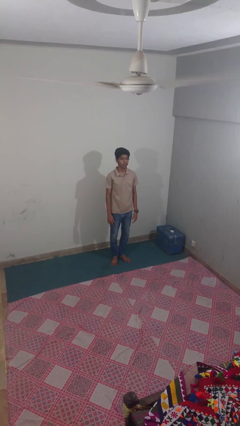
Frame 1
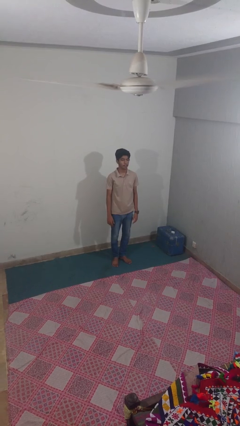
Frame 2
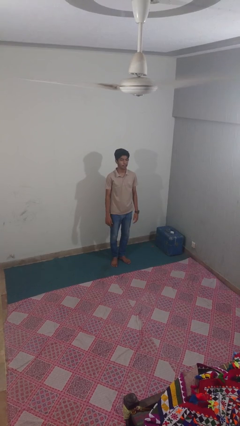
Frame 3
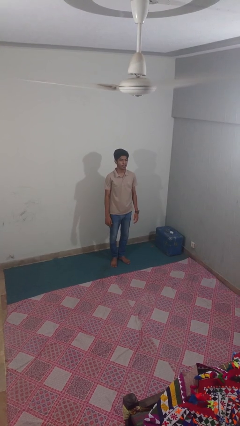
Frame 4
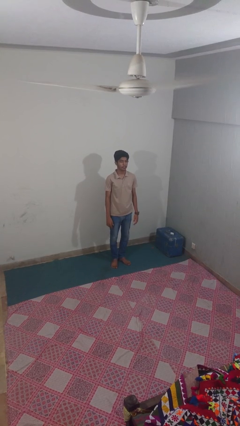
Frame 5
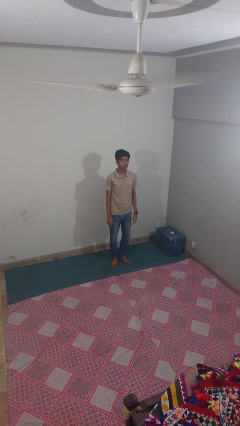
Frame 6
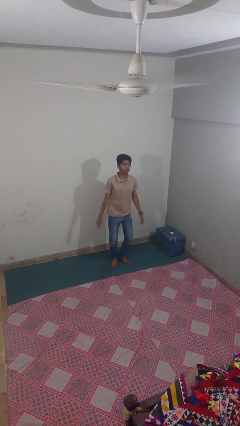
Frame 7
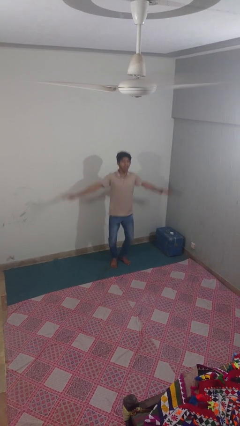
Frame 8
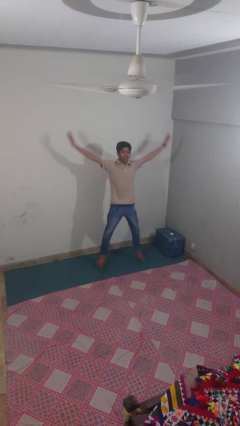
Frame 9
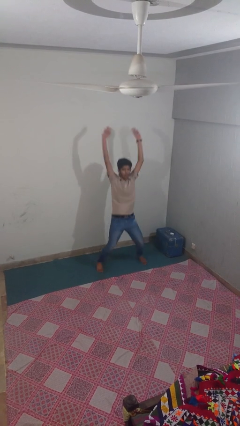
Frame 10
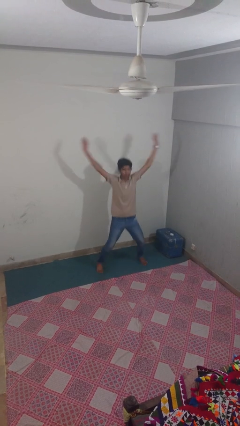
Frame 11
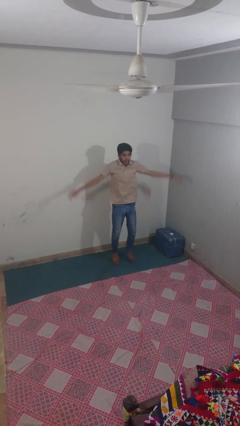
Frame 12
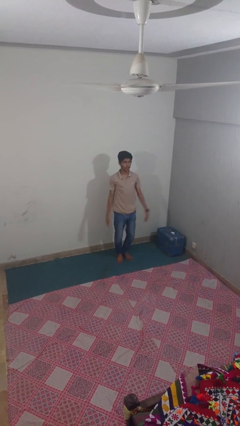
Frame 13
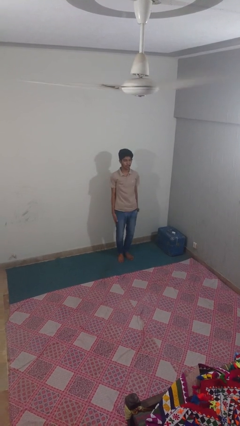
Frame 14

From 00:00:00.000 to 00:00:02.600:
person exercises with jumping jacks

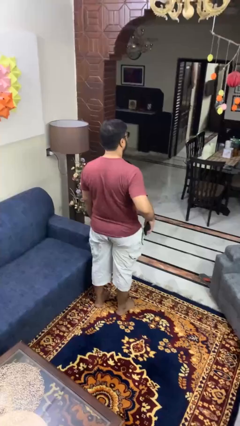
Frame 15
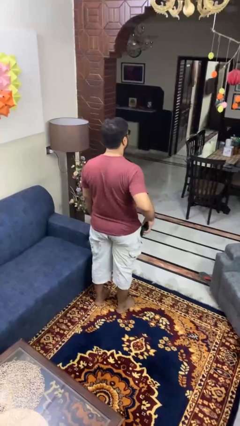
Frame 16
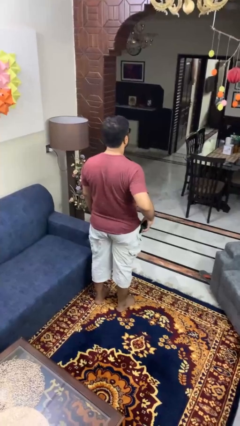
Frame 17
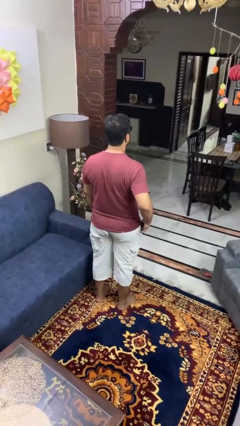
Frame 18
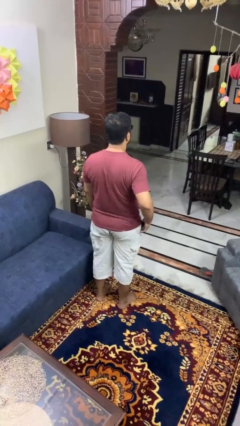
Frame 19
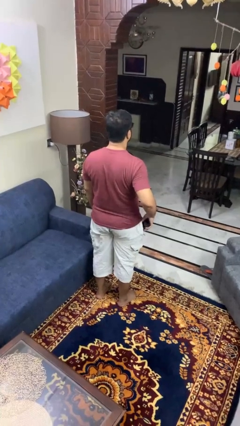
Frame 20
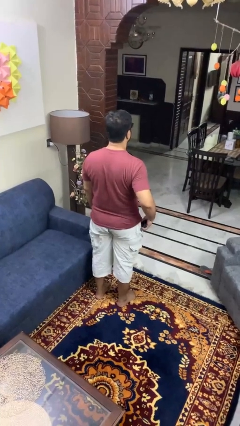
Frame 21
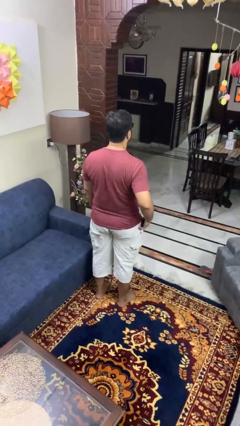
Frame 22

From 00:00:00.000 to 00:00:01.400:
person puts phone into pocket

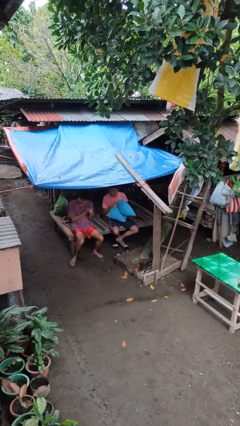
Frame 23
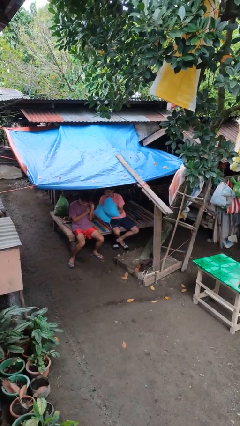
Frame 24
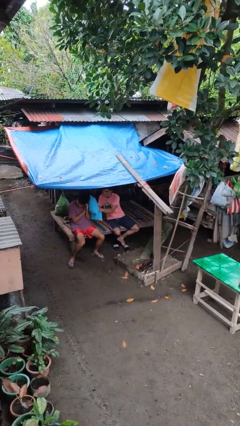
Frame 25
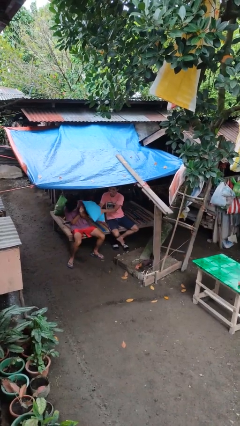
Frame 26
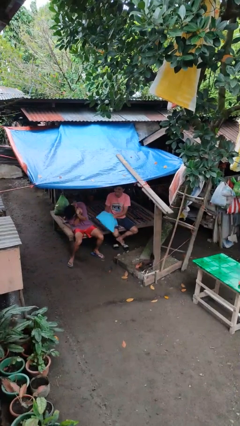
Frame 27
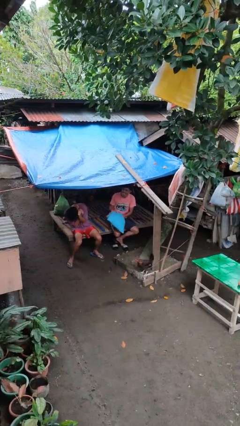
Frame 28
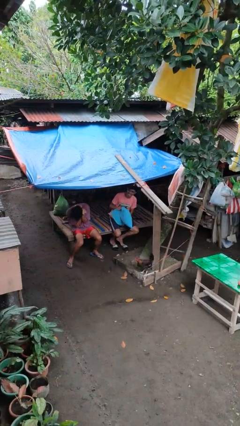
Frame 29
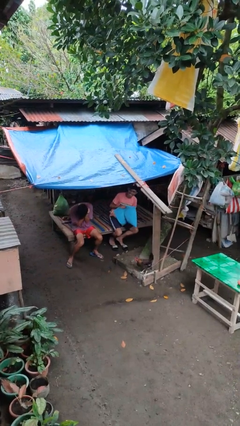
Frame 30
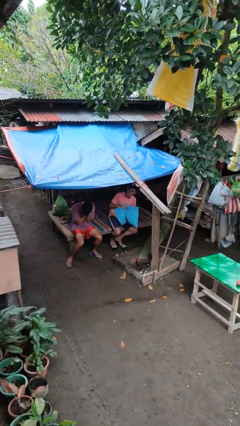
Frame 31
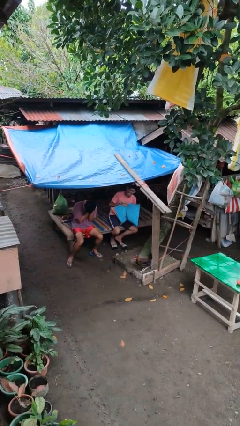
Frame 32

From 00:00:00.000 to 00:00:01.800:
person hits person with pillow

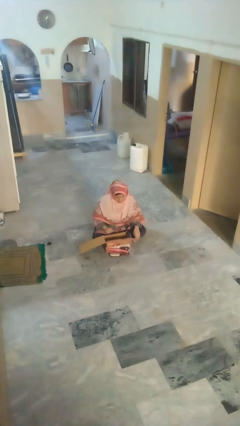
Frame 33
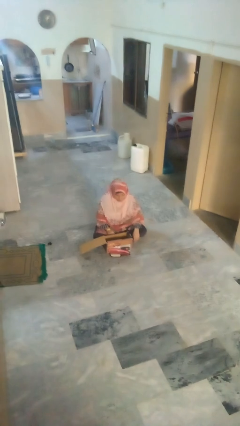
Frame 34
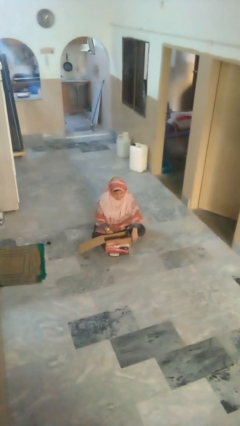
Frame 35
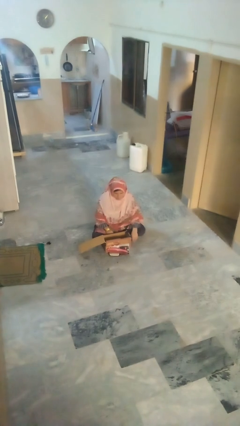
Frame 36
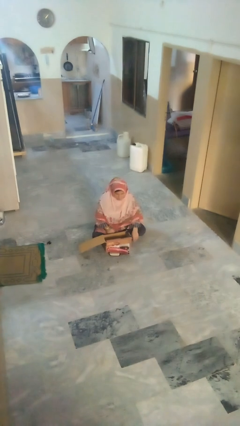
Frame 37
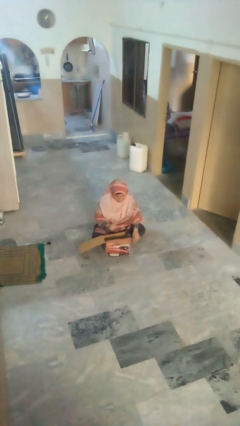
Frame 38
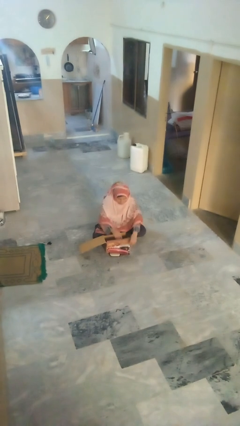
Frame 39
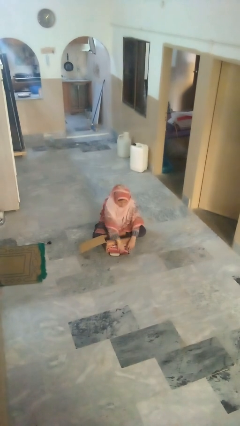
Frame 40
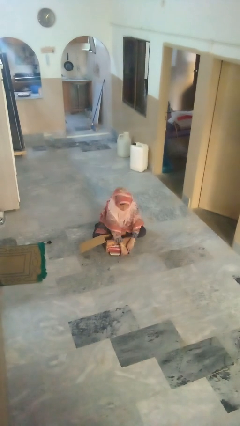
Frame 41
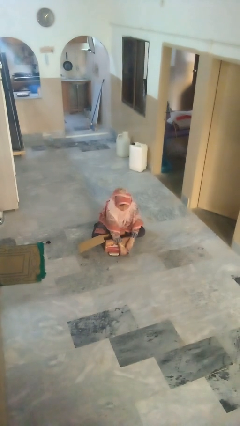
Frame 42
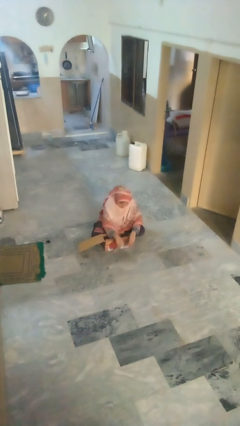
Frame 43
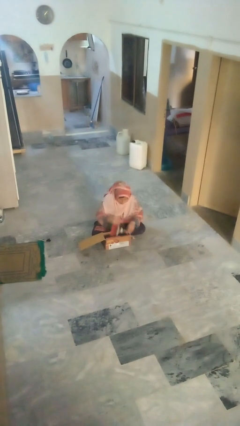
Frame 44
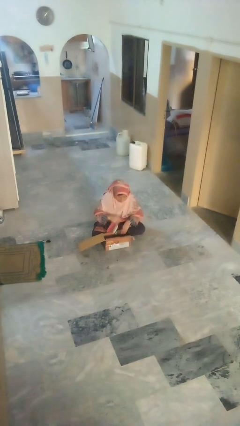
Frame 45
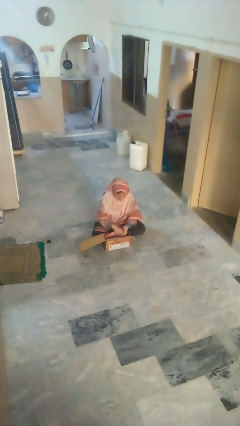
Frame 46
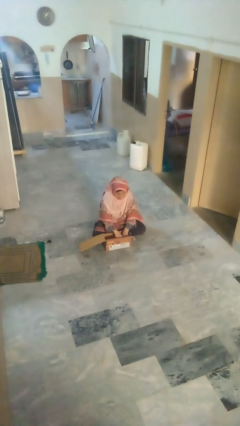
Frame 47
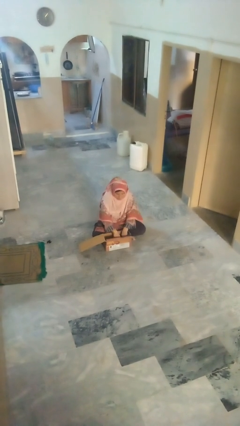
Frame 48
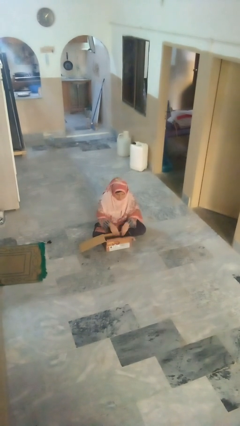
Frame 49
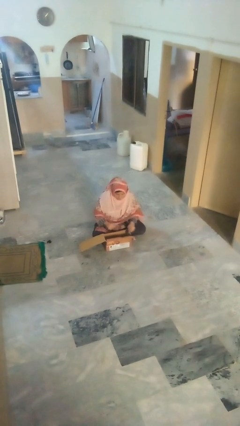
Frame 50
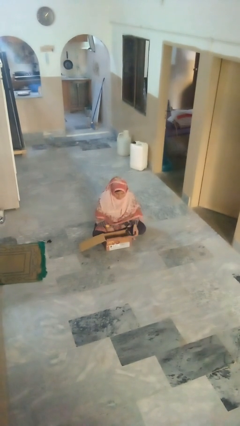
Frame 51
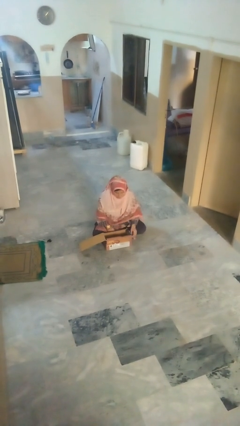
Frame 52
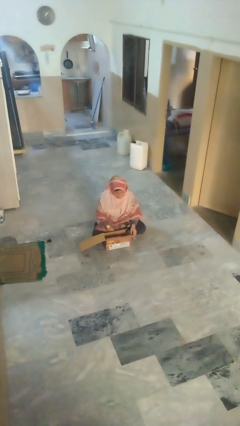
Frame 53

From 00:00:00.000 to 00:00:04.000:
person puts object into box

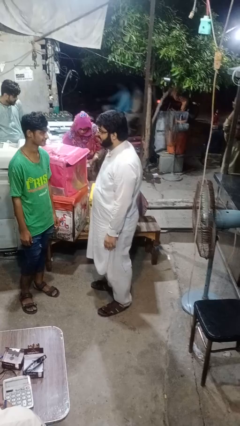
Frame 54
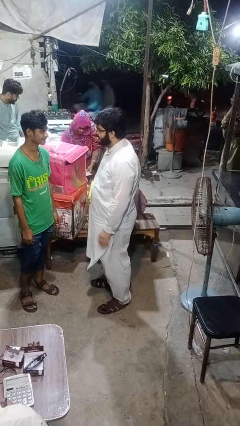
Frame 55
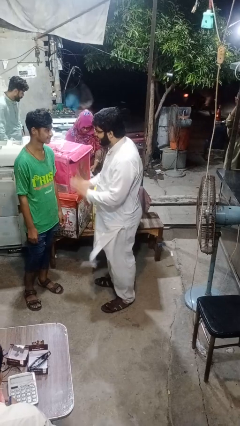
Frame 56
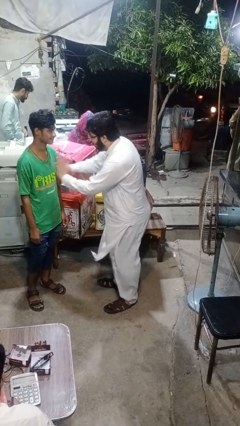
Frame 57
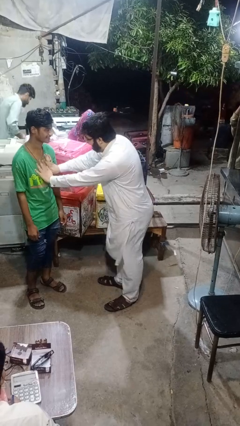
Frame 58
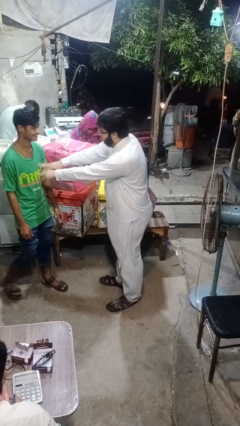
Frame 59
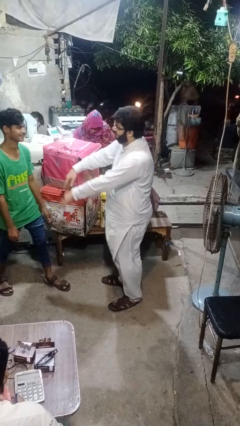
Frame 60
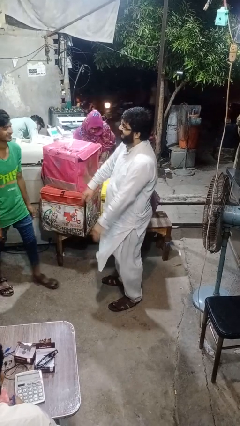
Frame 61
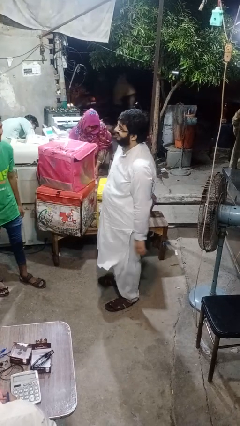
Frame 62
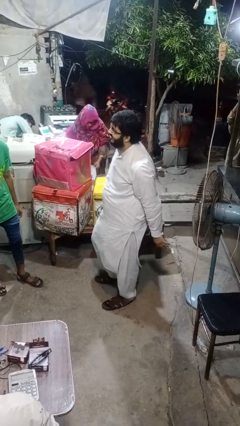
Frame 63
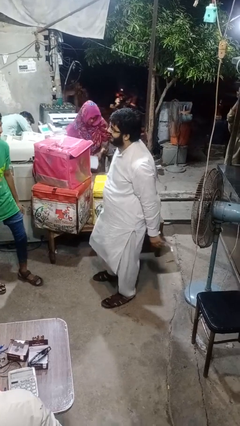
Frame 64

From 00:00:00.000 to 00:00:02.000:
person shoves person

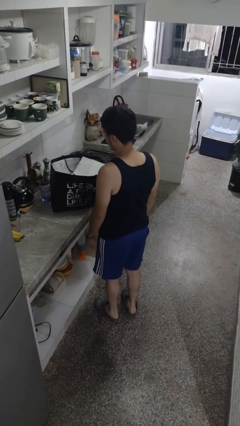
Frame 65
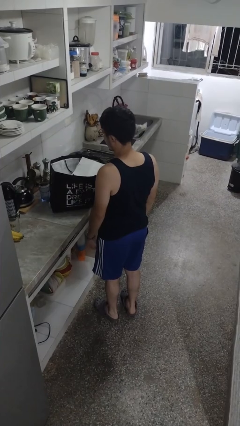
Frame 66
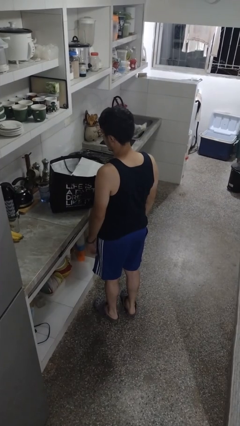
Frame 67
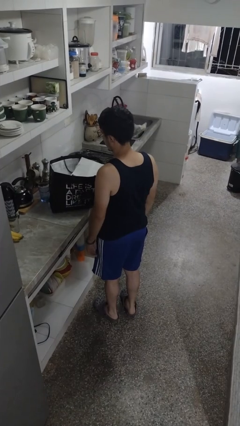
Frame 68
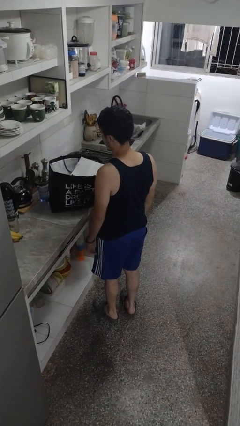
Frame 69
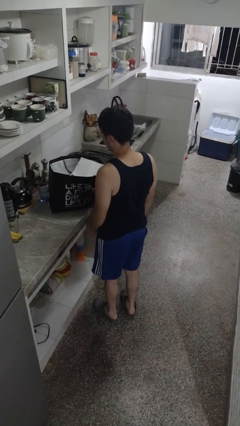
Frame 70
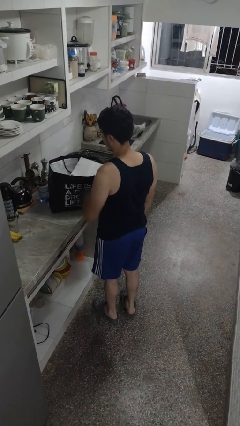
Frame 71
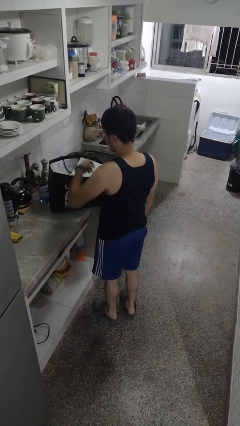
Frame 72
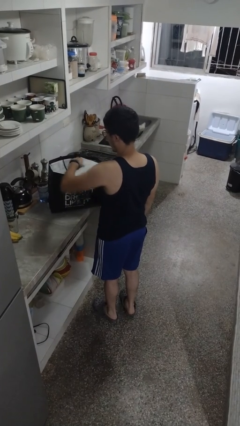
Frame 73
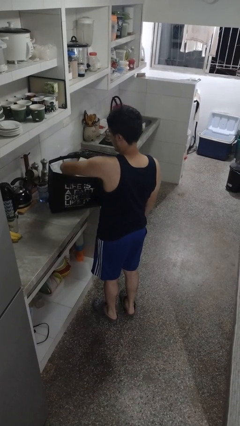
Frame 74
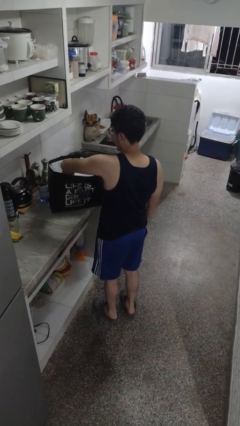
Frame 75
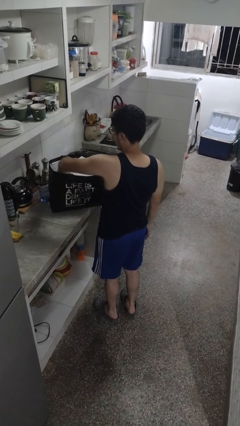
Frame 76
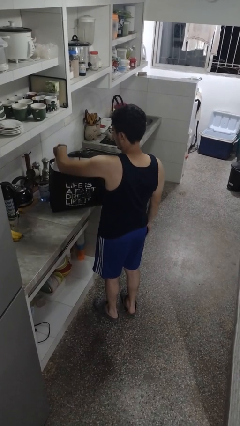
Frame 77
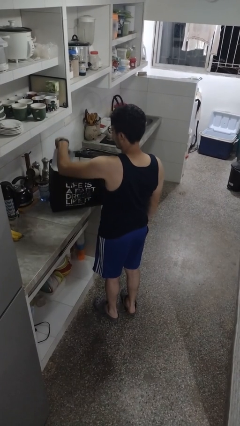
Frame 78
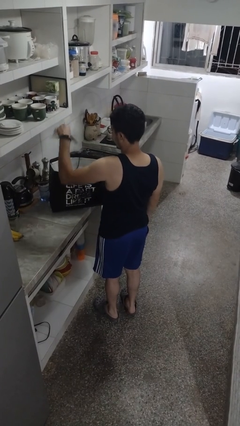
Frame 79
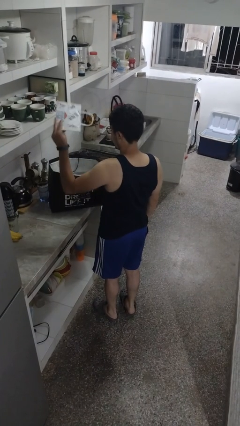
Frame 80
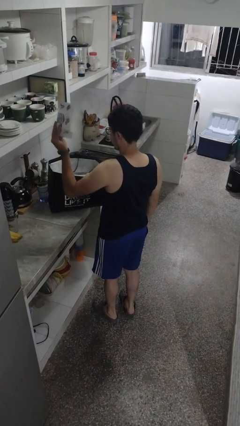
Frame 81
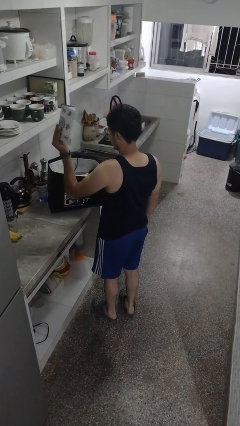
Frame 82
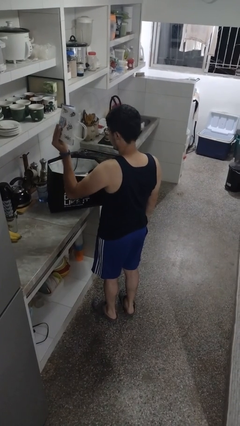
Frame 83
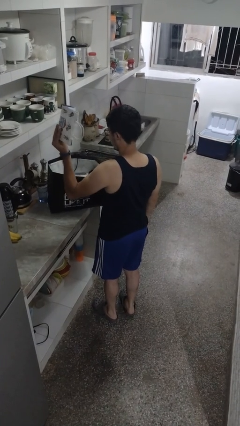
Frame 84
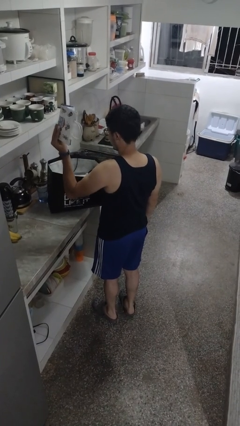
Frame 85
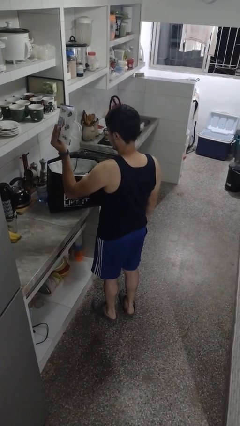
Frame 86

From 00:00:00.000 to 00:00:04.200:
person takes object from bag

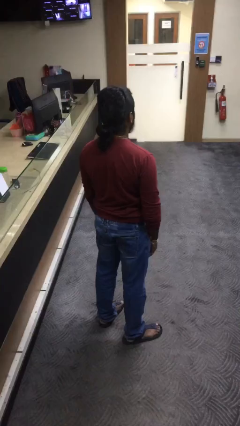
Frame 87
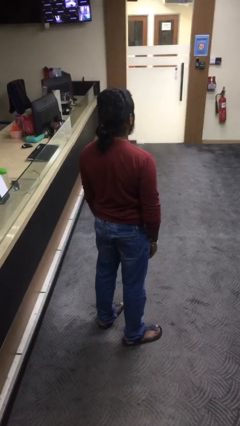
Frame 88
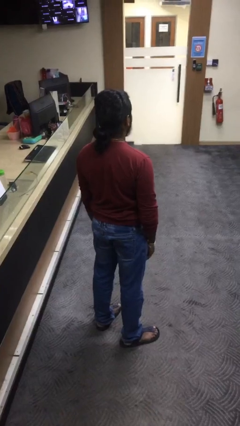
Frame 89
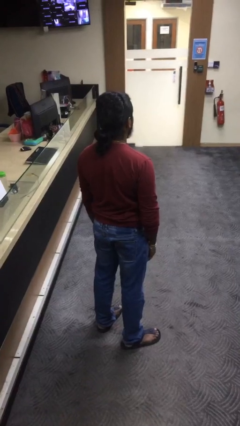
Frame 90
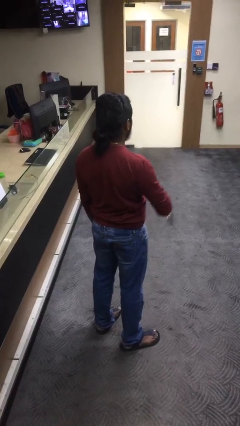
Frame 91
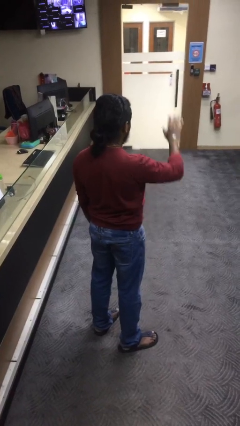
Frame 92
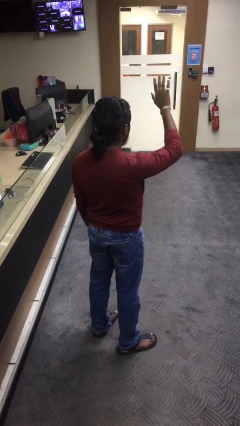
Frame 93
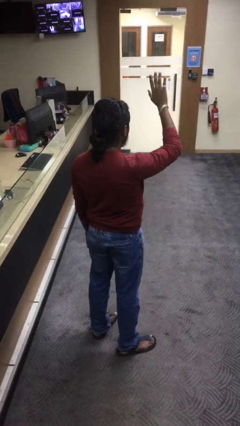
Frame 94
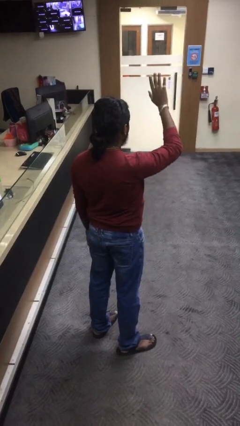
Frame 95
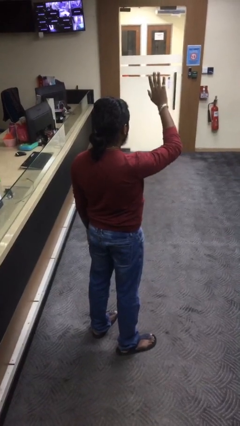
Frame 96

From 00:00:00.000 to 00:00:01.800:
person gestures raise hand
